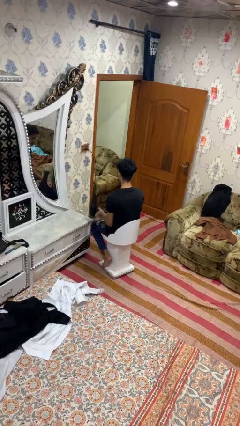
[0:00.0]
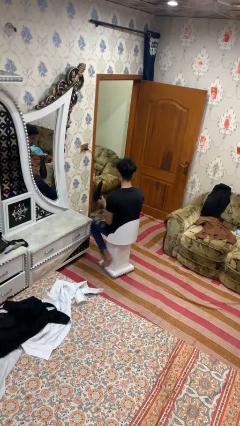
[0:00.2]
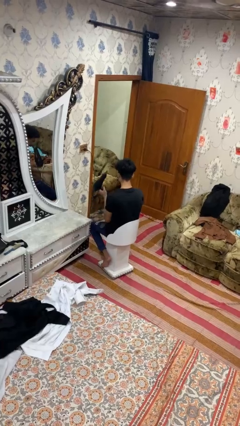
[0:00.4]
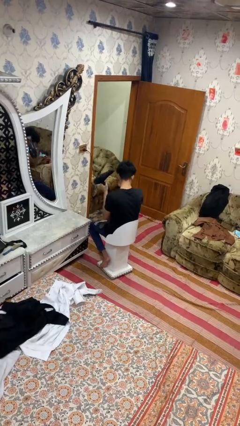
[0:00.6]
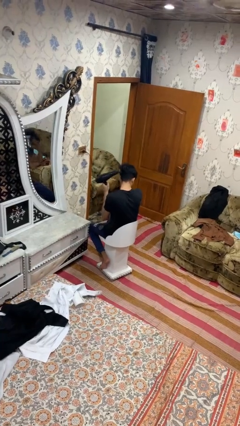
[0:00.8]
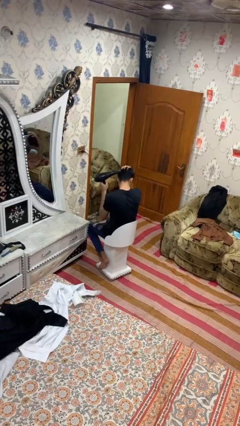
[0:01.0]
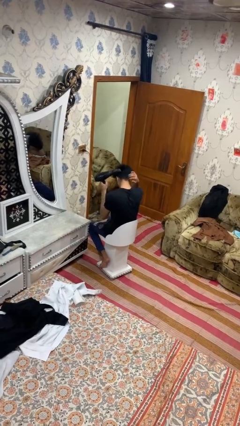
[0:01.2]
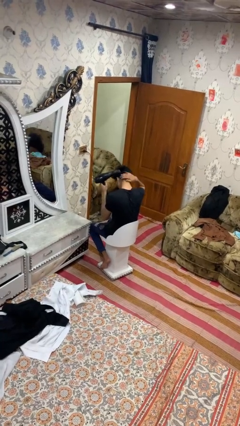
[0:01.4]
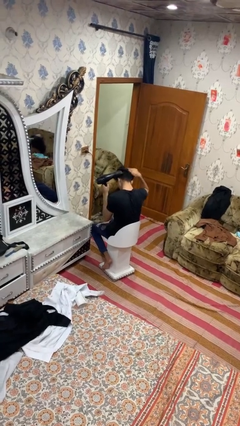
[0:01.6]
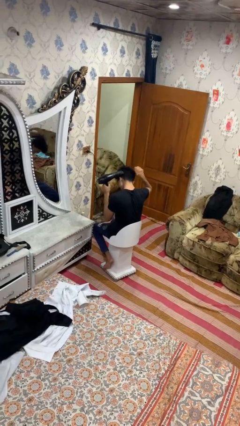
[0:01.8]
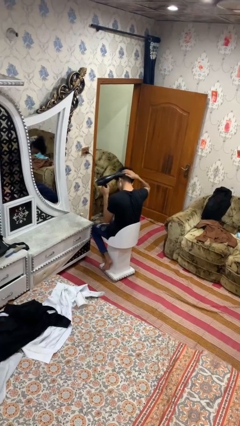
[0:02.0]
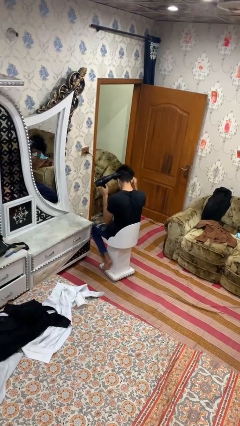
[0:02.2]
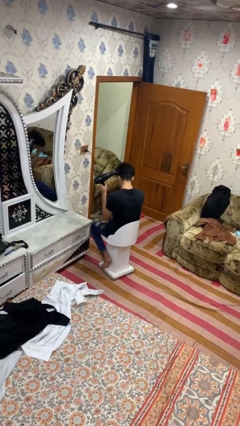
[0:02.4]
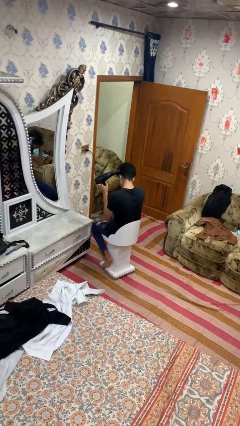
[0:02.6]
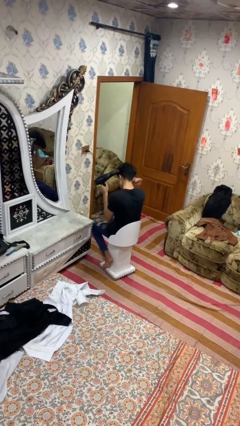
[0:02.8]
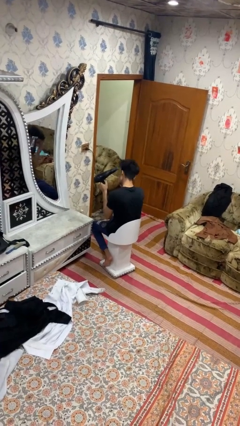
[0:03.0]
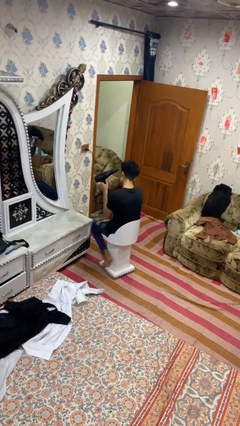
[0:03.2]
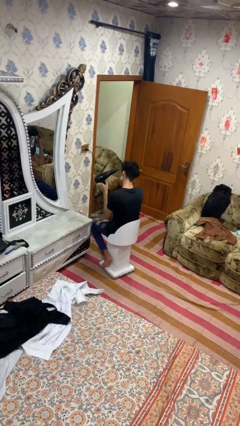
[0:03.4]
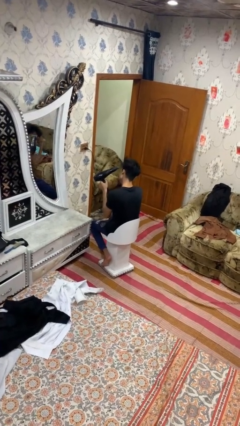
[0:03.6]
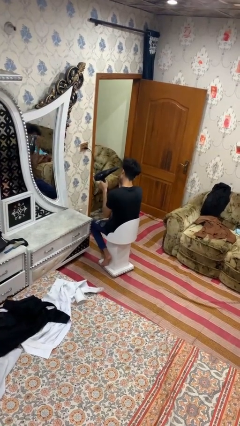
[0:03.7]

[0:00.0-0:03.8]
person dries hair with hairdryer

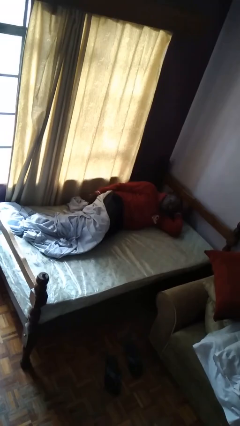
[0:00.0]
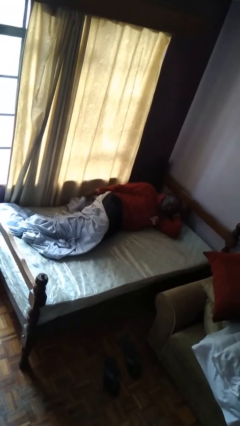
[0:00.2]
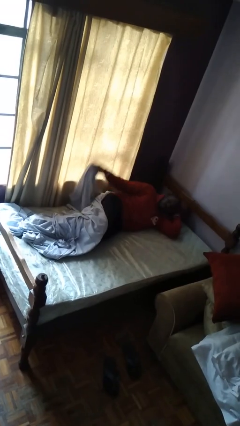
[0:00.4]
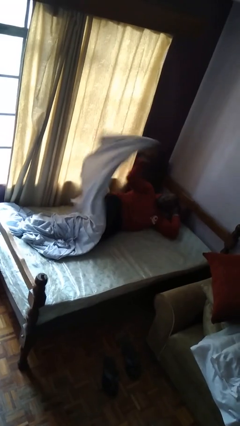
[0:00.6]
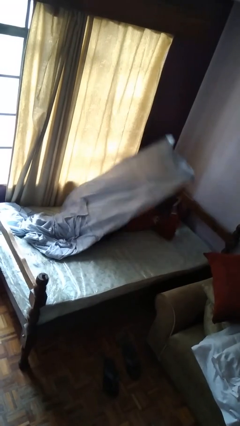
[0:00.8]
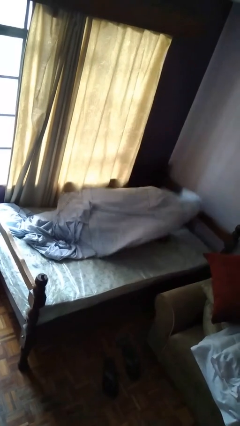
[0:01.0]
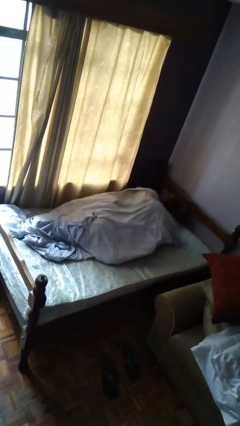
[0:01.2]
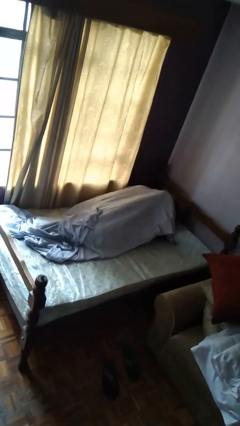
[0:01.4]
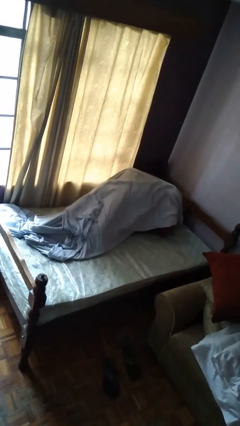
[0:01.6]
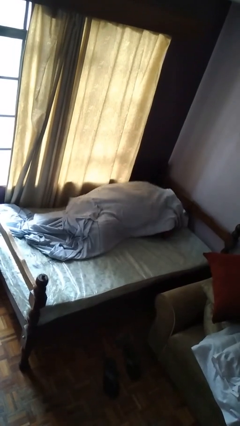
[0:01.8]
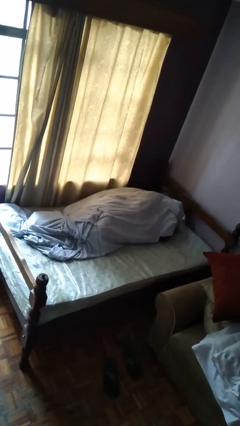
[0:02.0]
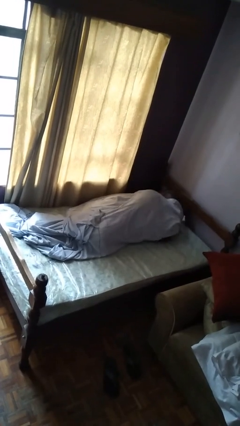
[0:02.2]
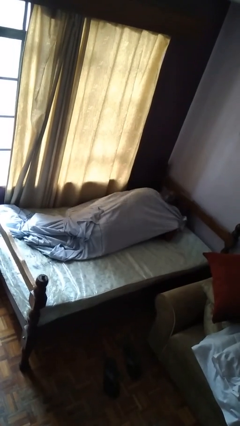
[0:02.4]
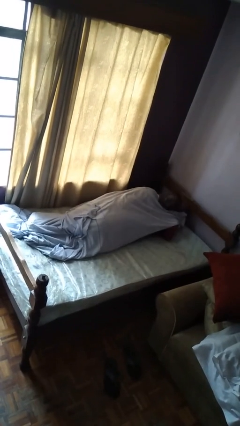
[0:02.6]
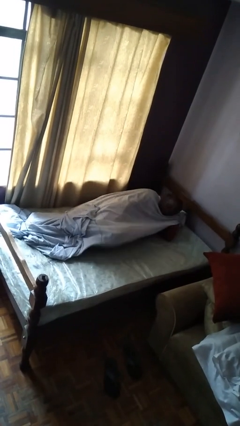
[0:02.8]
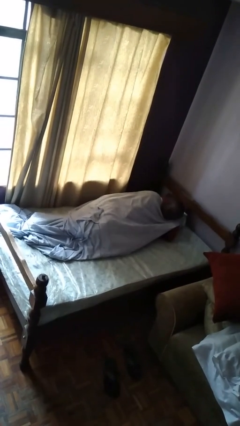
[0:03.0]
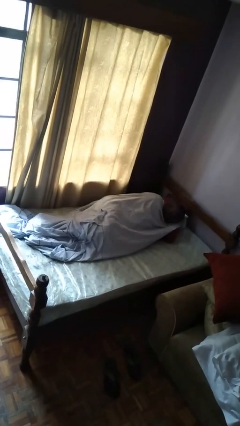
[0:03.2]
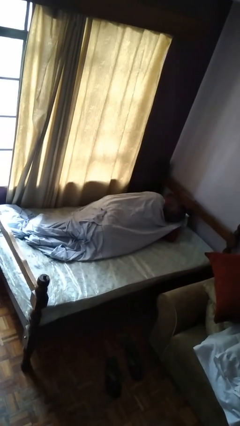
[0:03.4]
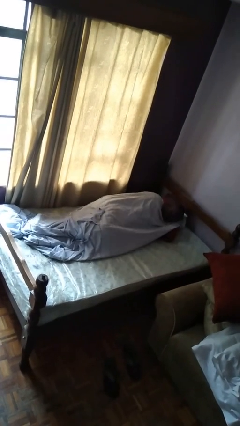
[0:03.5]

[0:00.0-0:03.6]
person covers with bedsheets

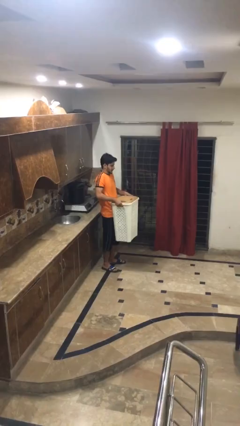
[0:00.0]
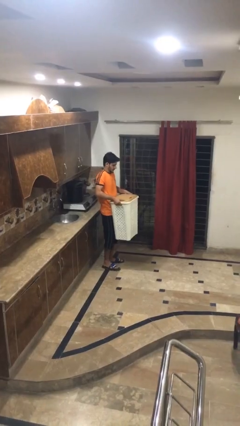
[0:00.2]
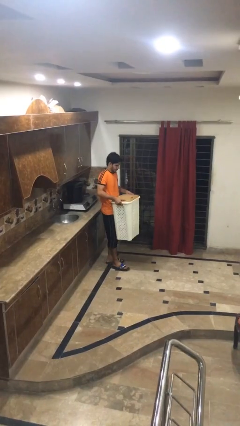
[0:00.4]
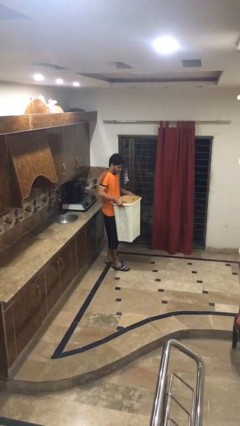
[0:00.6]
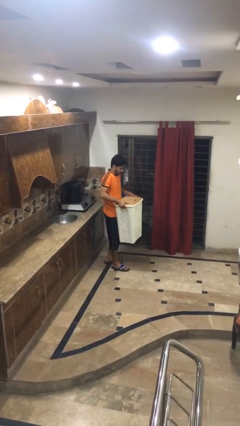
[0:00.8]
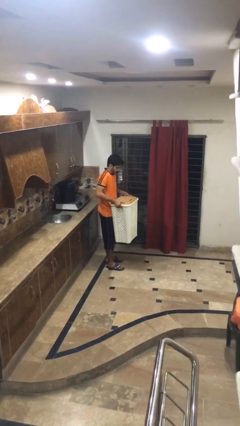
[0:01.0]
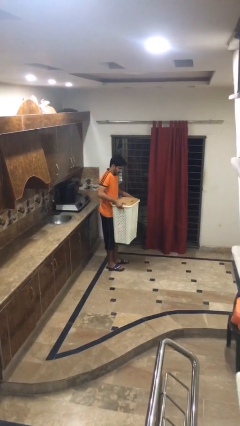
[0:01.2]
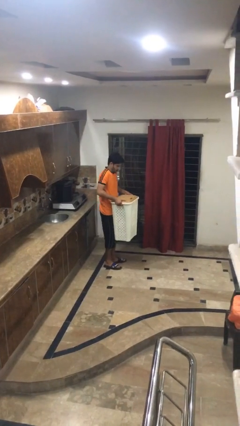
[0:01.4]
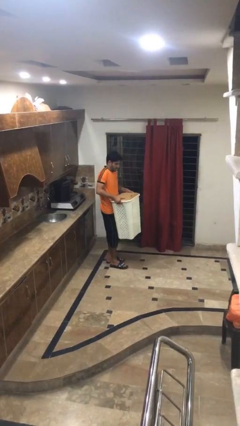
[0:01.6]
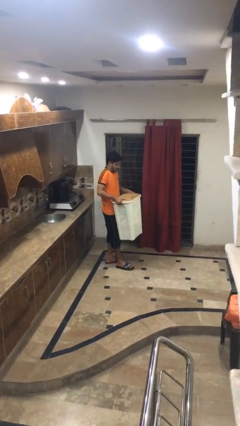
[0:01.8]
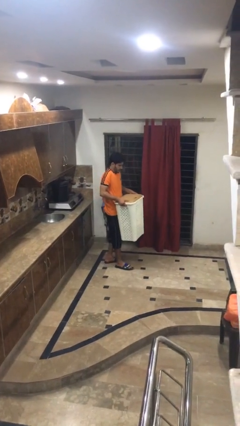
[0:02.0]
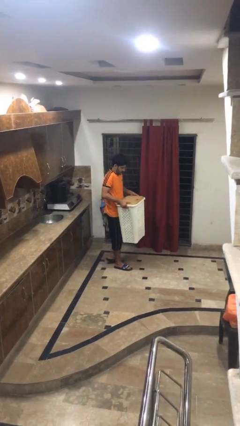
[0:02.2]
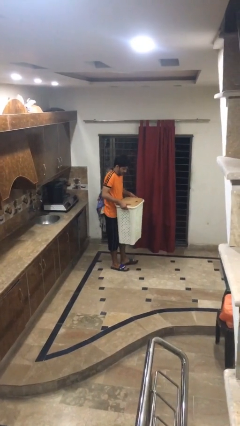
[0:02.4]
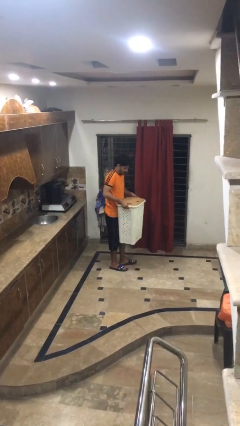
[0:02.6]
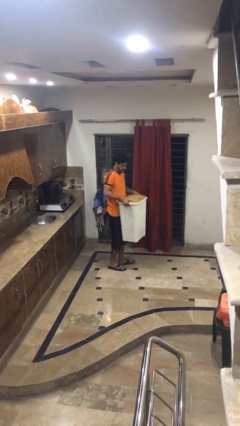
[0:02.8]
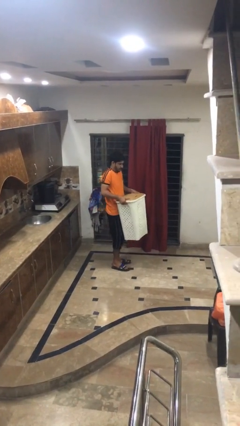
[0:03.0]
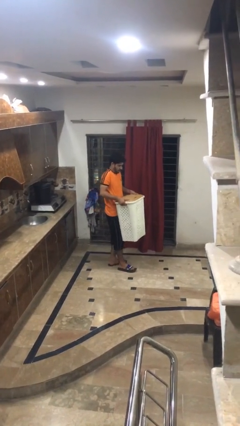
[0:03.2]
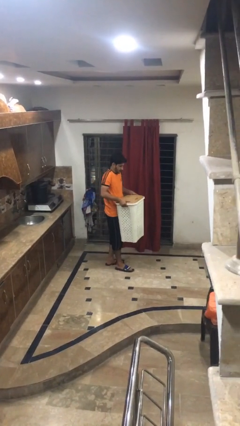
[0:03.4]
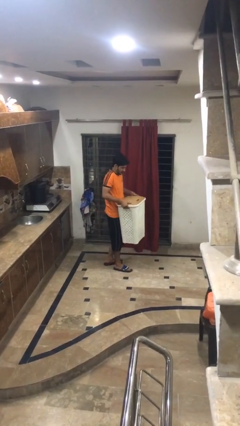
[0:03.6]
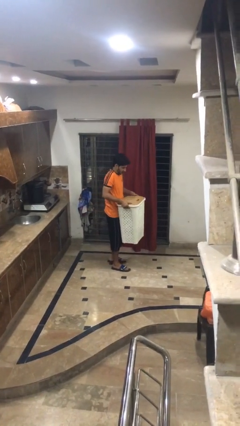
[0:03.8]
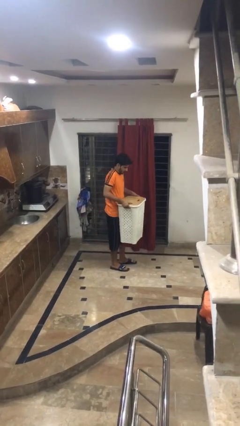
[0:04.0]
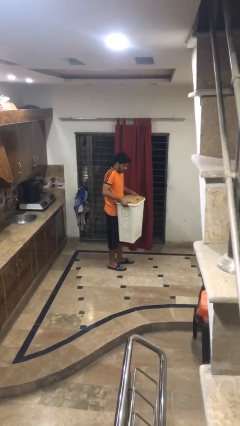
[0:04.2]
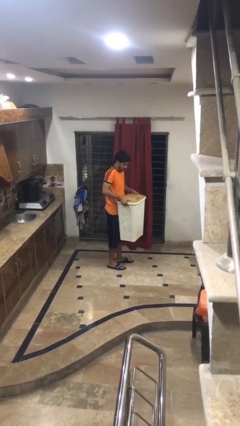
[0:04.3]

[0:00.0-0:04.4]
person carries laundry basket

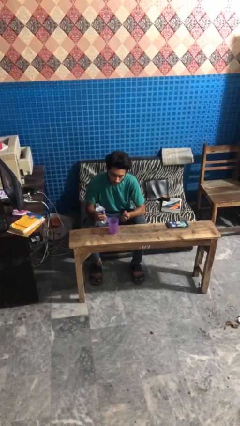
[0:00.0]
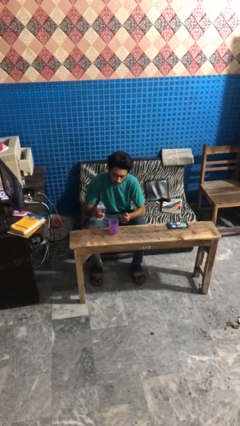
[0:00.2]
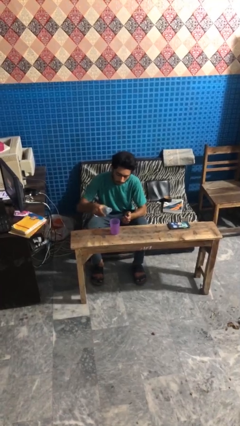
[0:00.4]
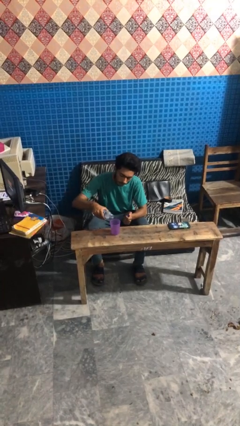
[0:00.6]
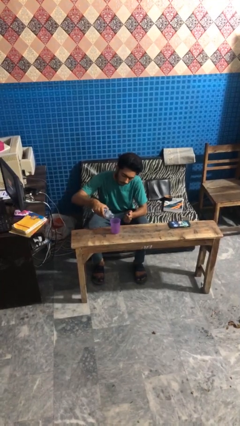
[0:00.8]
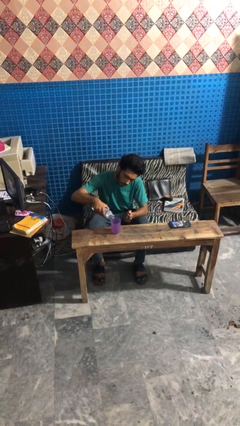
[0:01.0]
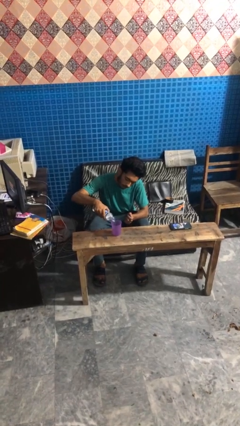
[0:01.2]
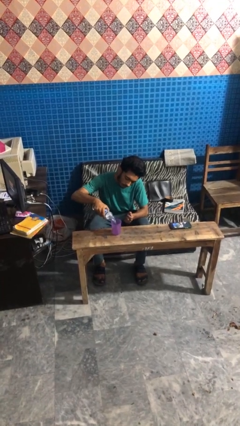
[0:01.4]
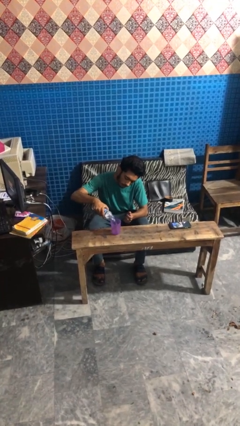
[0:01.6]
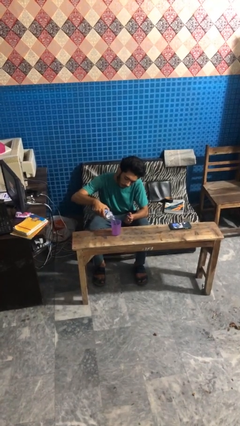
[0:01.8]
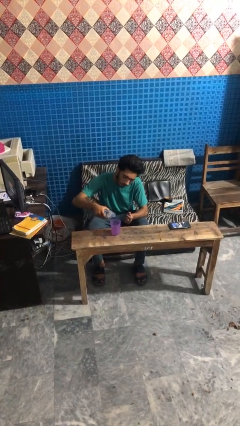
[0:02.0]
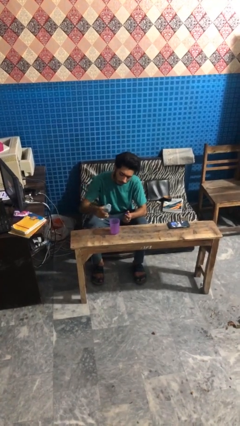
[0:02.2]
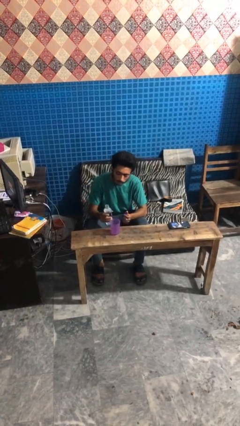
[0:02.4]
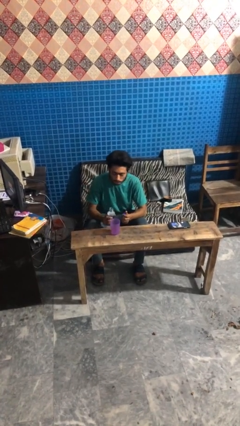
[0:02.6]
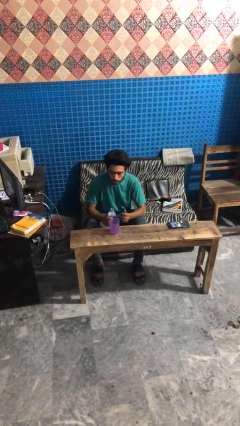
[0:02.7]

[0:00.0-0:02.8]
person pours liquid into cup

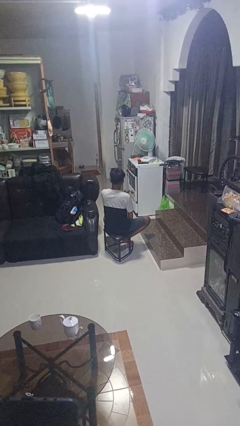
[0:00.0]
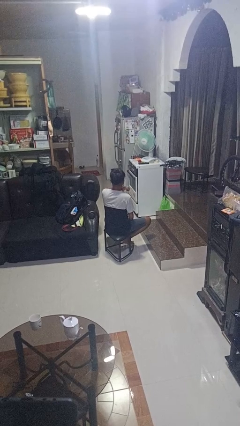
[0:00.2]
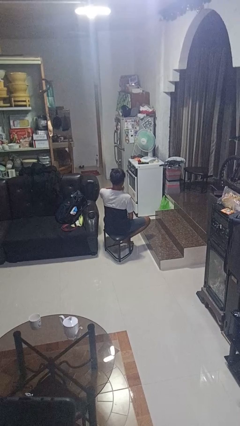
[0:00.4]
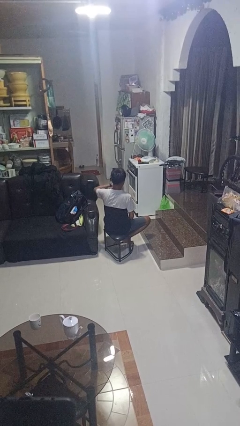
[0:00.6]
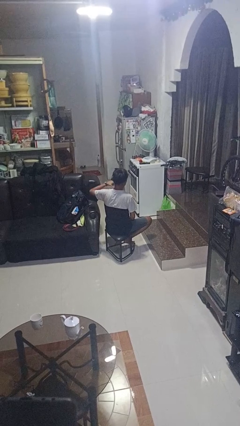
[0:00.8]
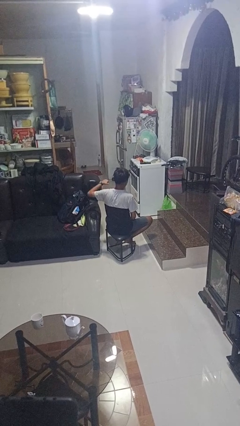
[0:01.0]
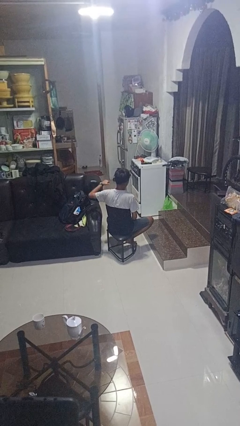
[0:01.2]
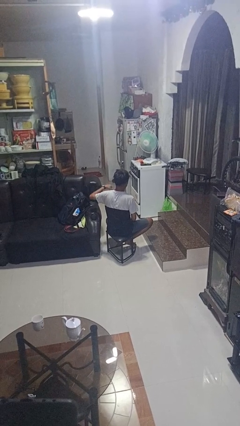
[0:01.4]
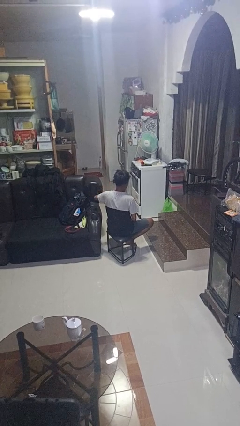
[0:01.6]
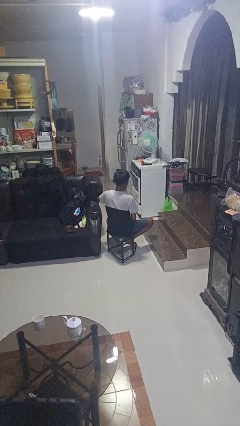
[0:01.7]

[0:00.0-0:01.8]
person gestures cut

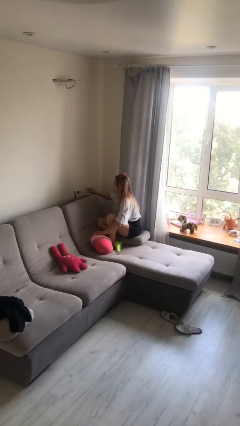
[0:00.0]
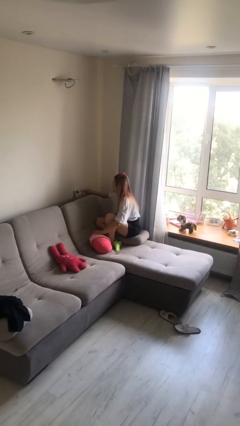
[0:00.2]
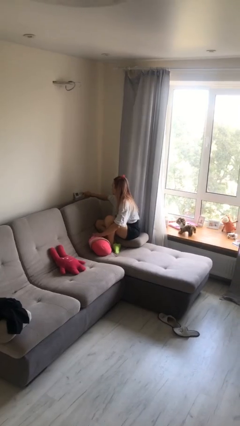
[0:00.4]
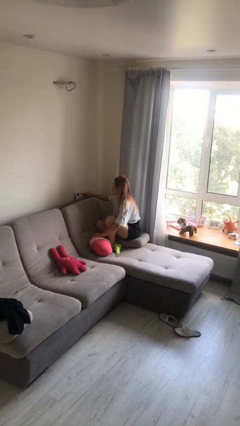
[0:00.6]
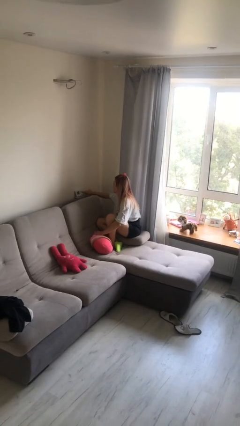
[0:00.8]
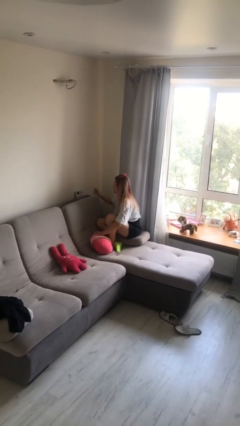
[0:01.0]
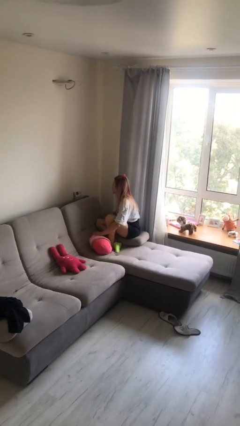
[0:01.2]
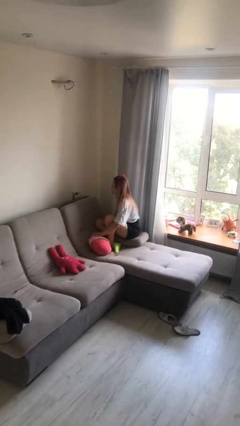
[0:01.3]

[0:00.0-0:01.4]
person adjusts thermostat
